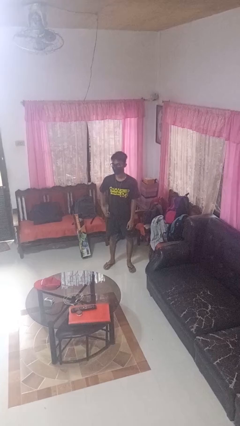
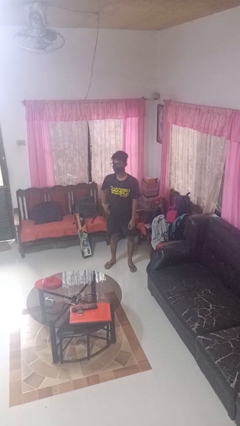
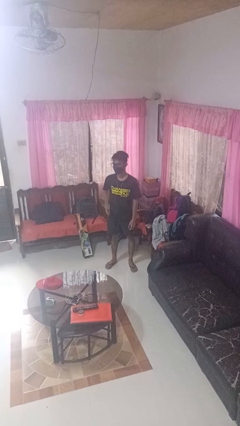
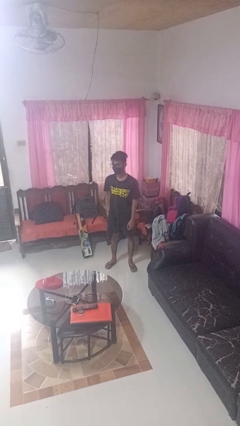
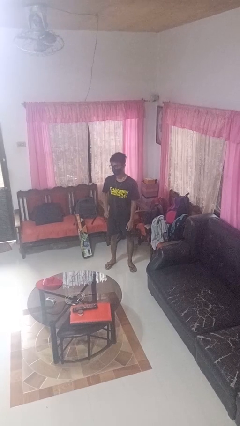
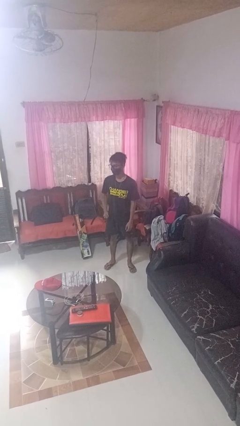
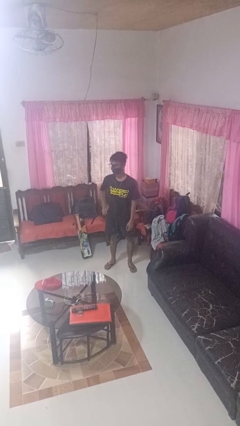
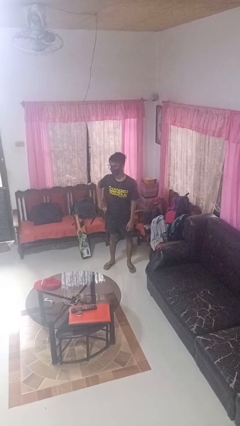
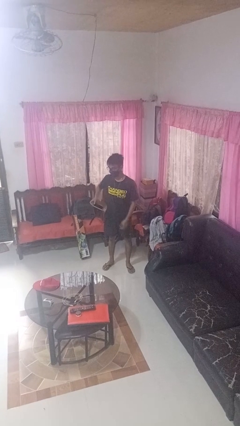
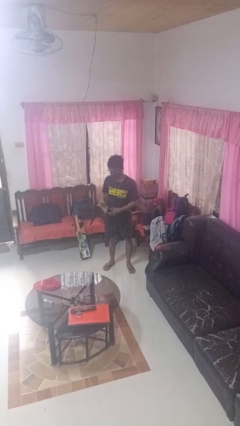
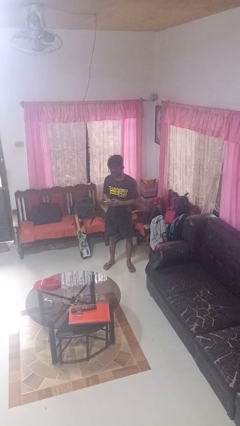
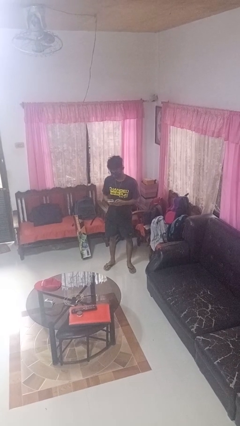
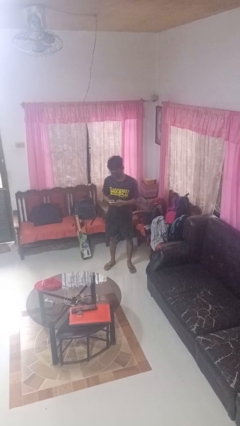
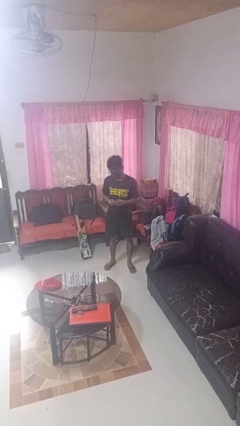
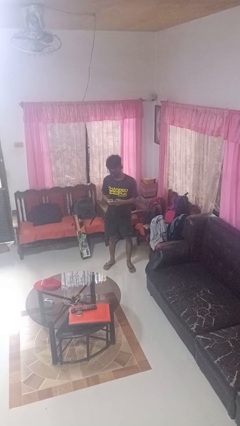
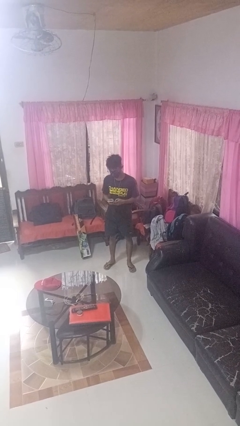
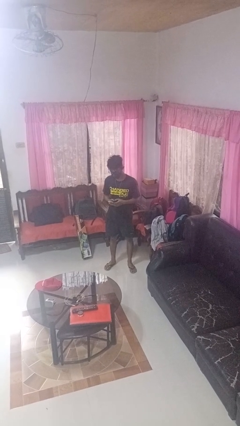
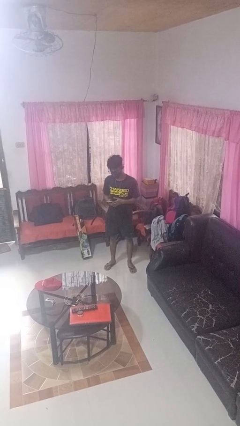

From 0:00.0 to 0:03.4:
person takes phone from pocket

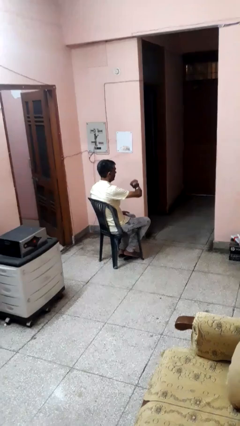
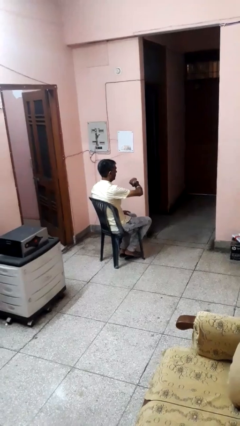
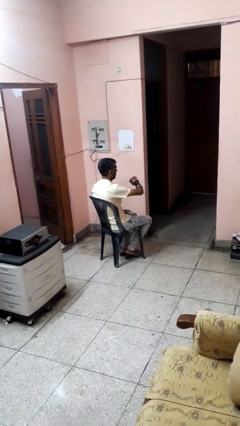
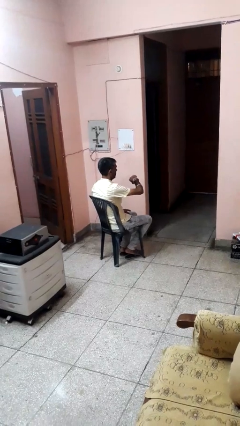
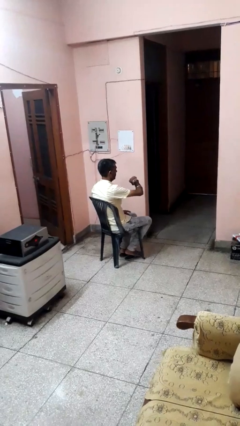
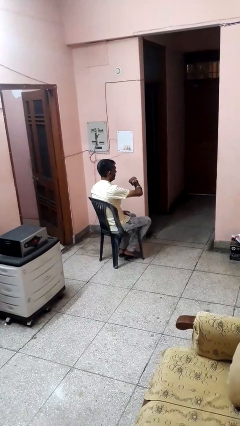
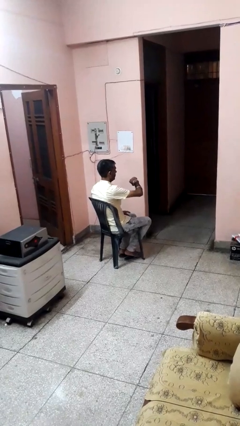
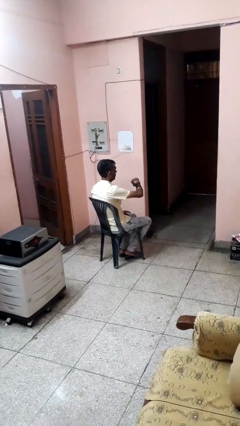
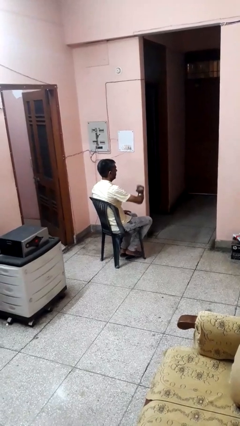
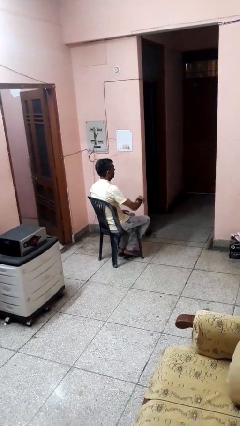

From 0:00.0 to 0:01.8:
person looks at wristwatch

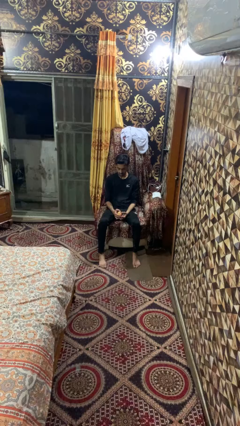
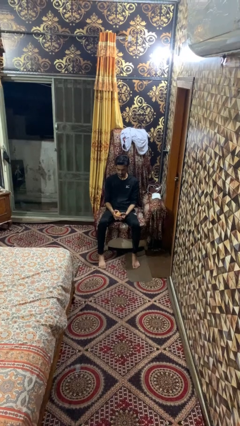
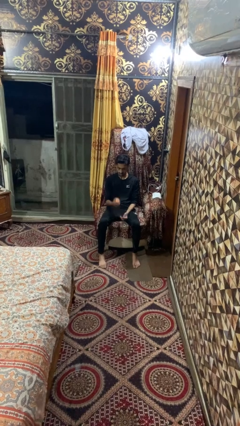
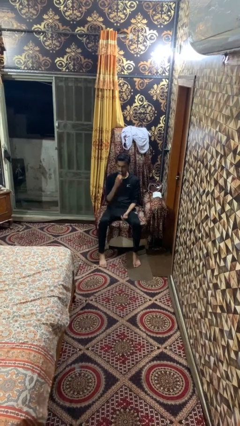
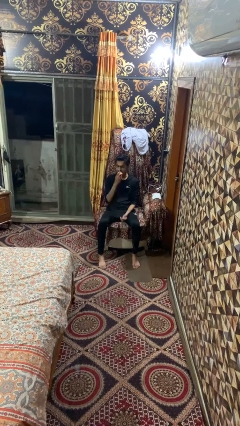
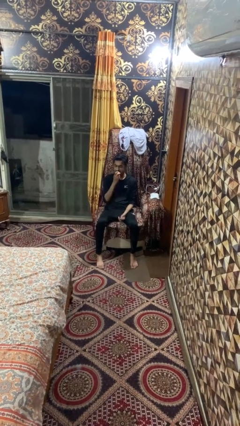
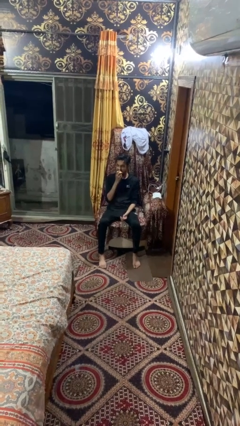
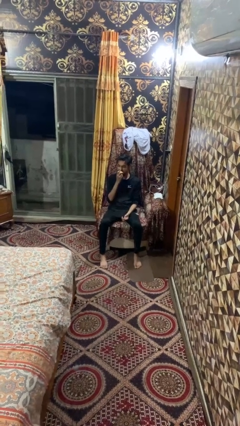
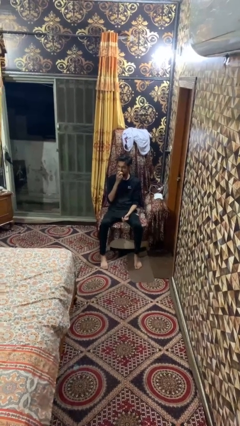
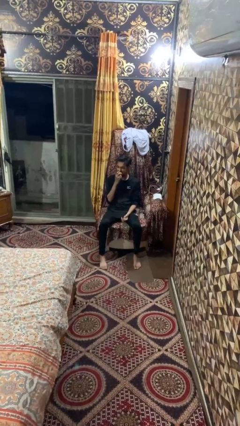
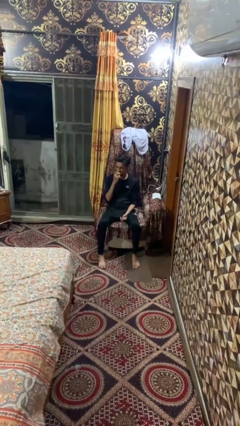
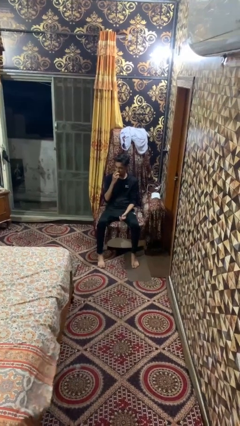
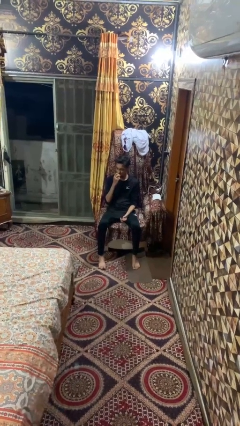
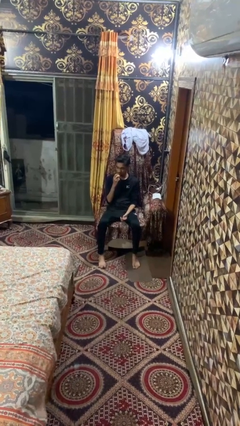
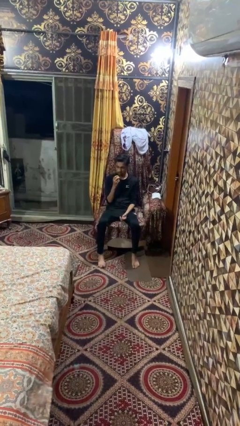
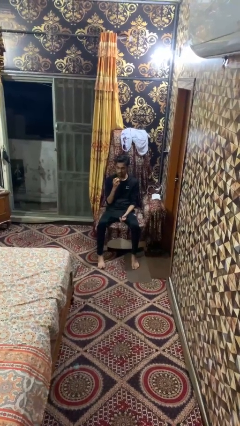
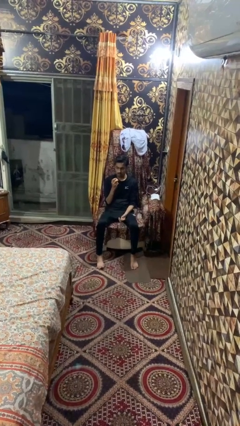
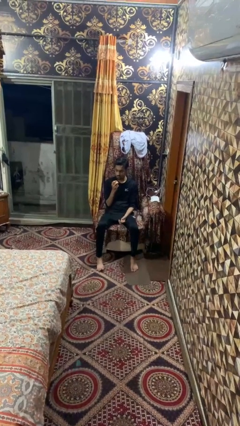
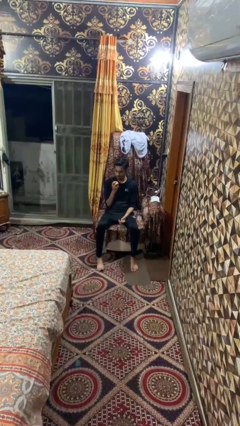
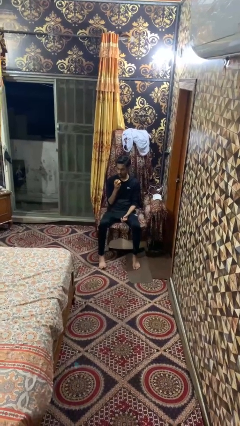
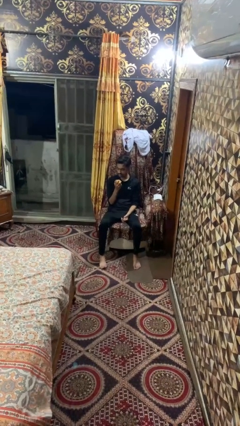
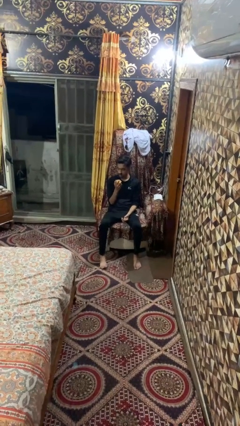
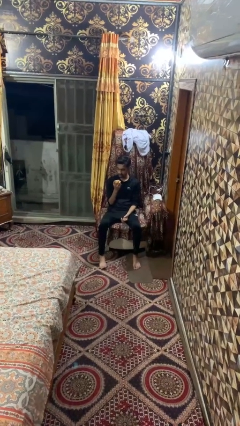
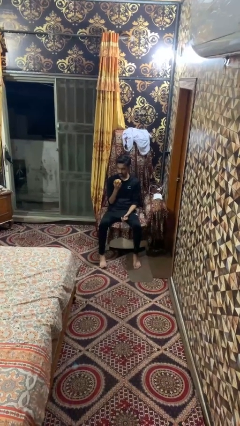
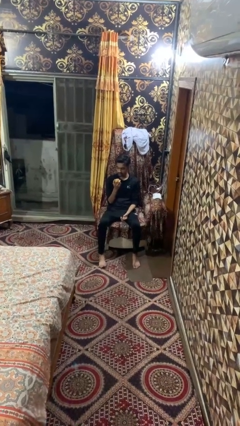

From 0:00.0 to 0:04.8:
person eats apple

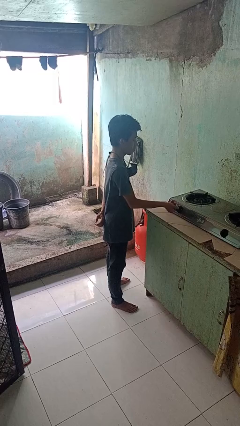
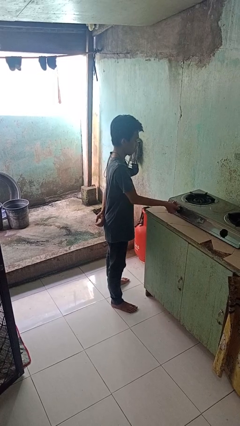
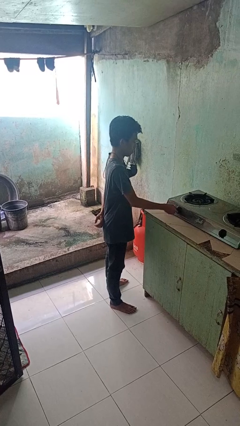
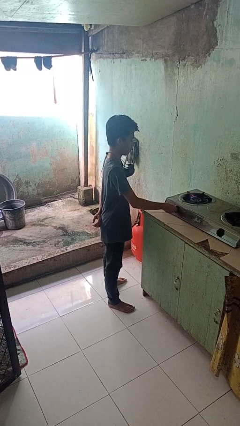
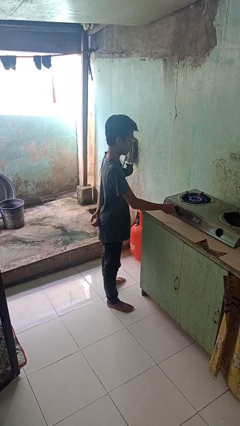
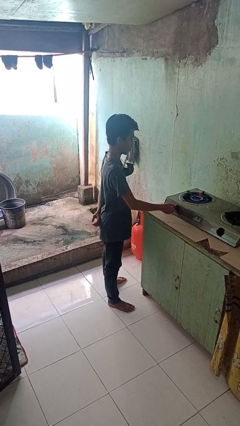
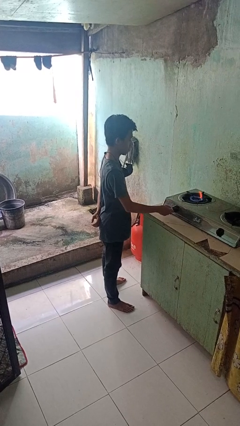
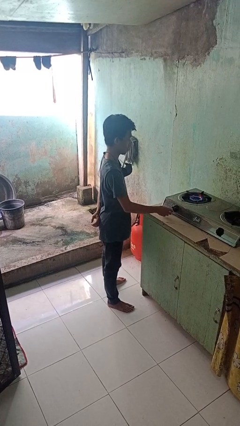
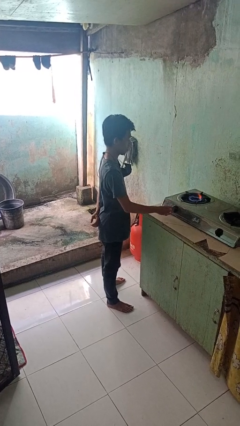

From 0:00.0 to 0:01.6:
person turns on stovetop

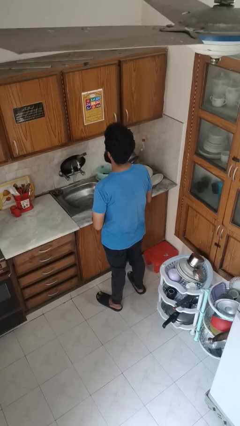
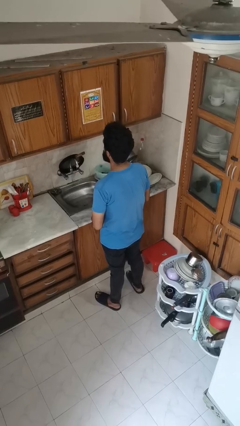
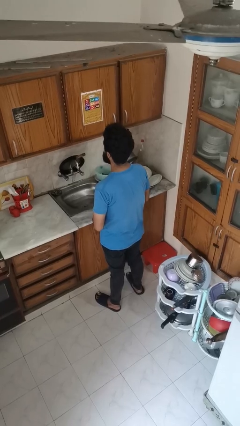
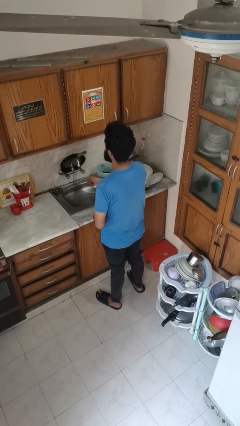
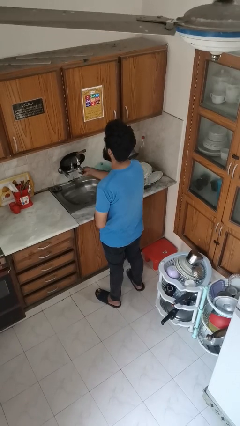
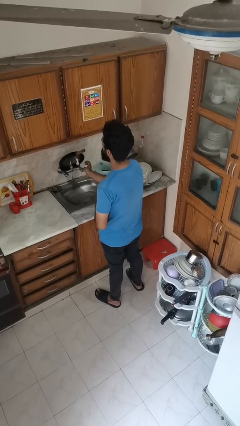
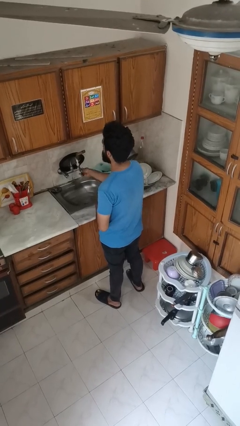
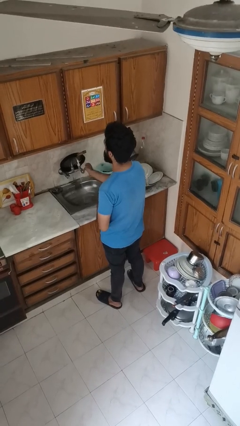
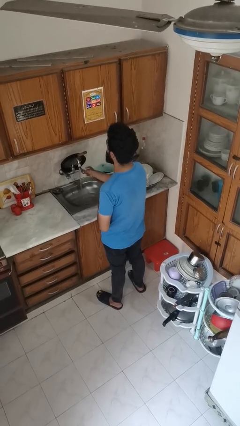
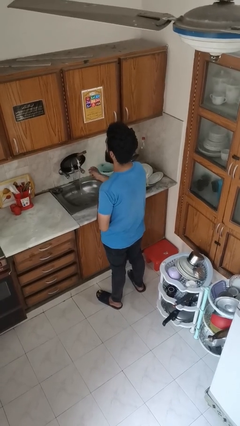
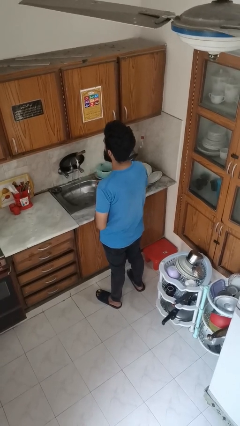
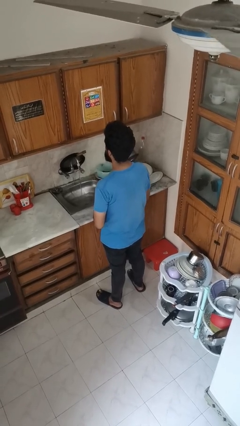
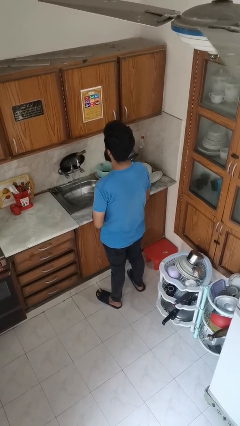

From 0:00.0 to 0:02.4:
person turns on faucet

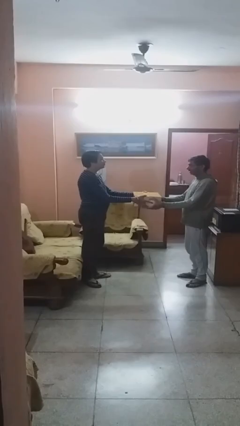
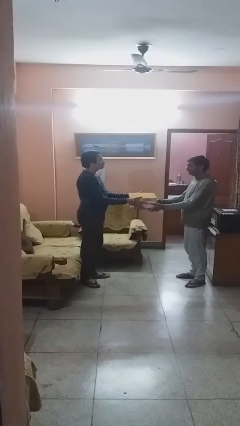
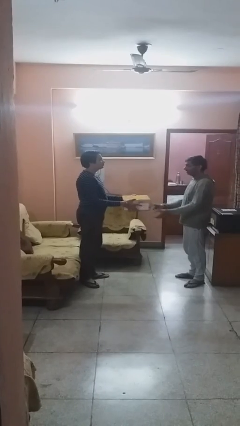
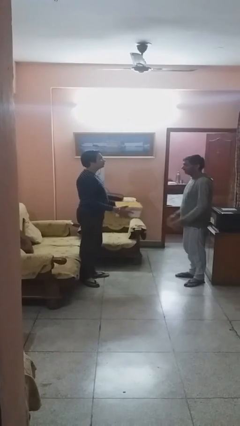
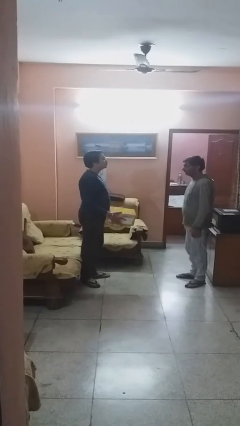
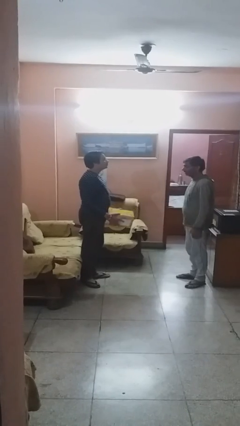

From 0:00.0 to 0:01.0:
person transfers object to person

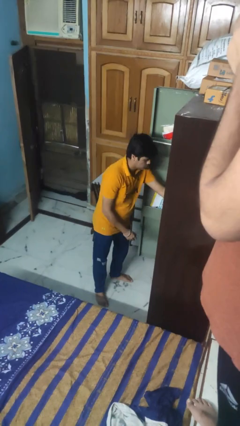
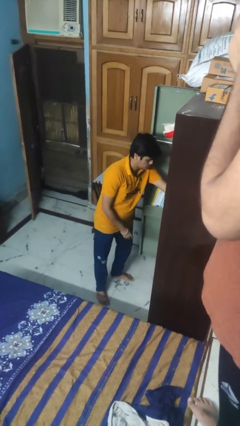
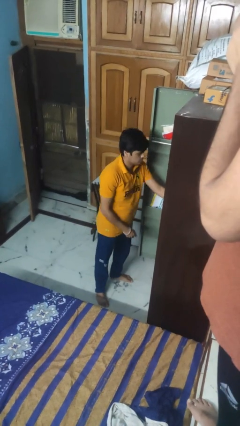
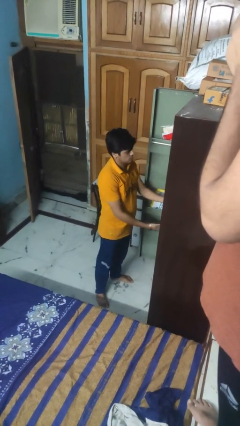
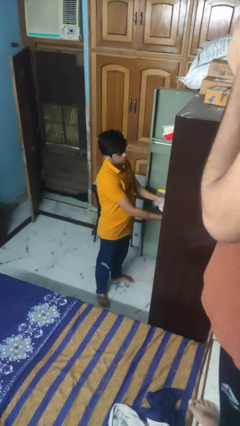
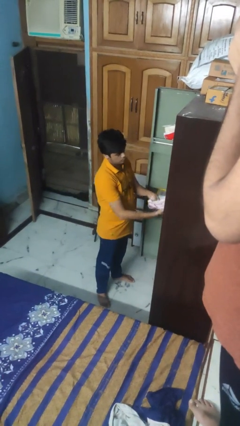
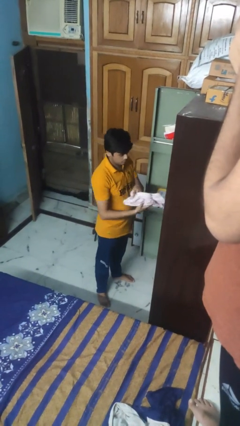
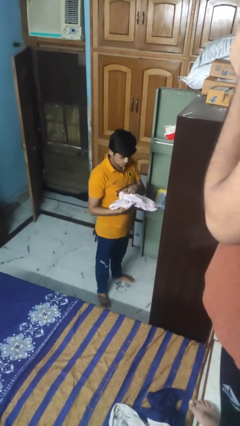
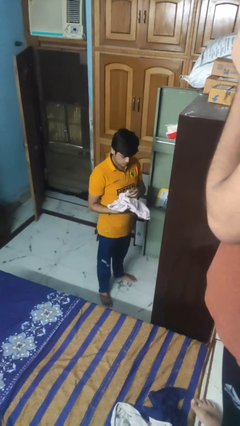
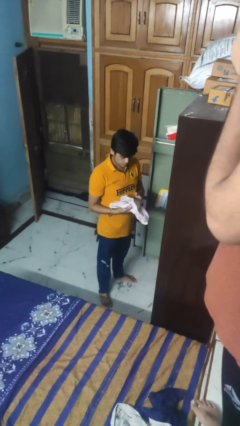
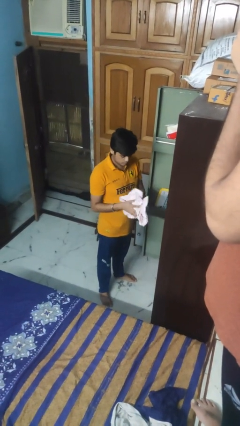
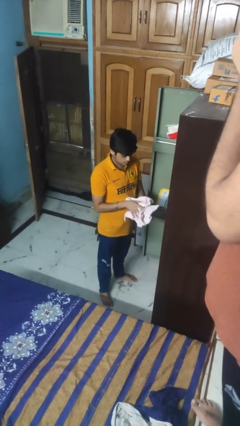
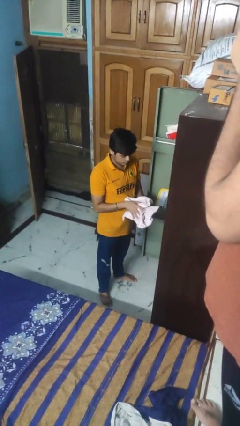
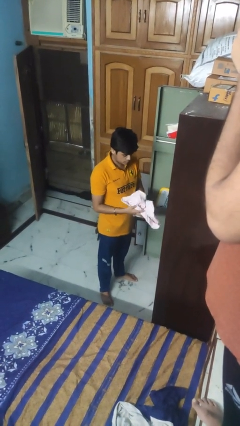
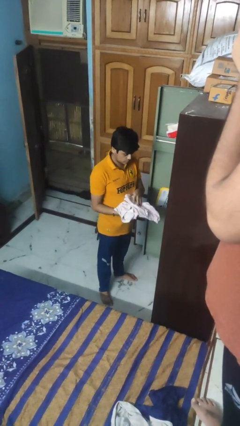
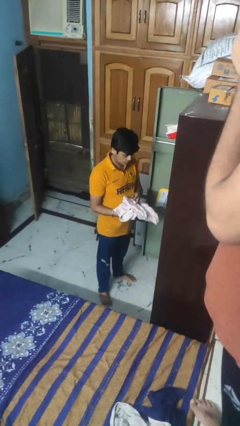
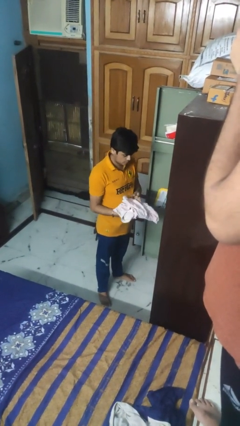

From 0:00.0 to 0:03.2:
person takes clothes from dresser
